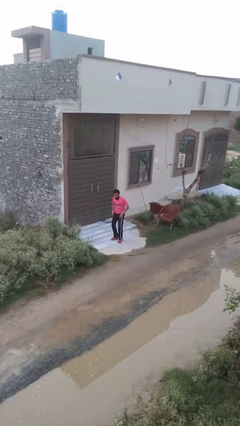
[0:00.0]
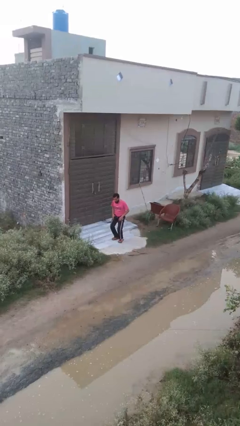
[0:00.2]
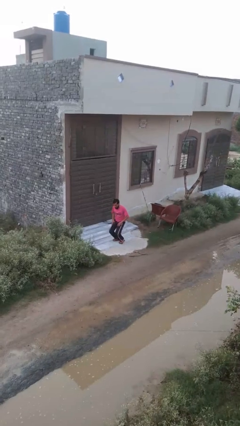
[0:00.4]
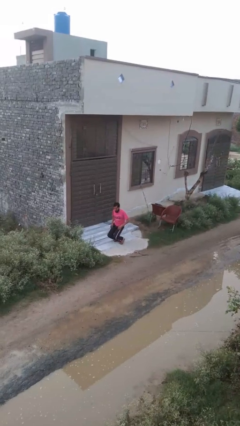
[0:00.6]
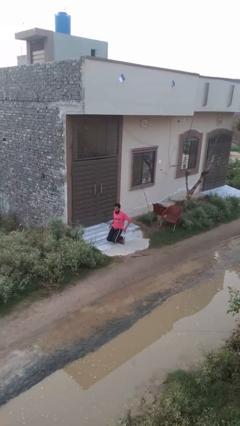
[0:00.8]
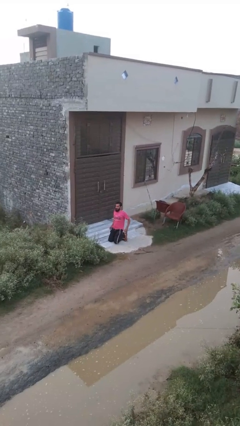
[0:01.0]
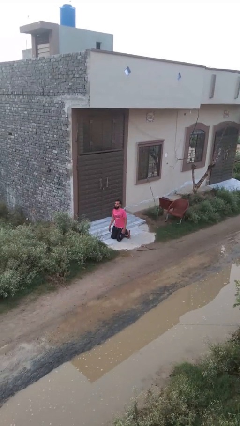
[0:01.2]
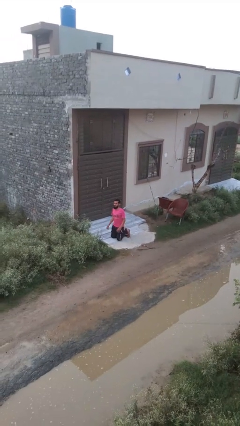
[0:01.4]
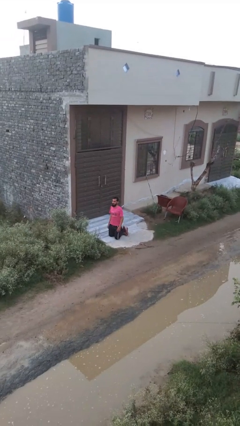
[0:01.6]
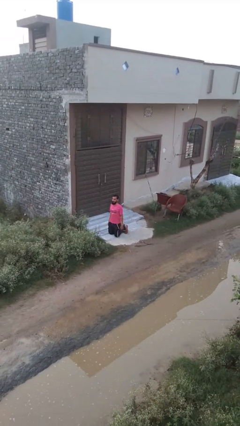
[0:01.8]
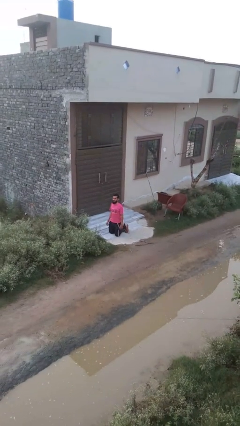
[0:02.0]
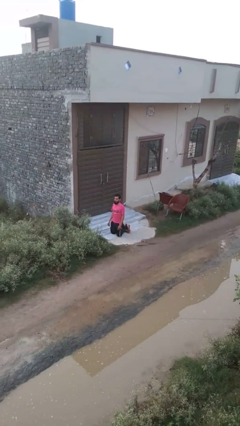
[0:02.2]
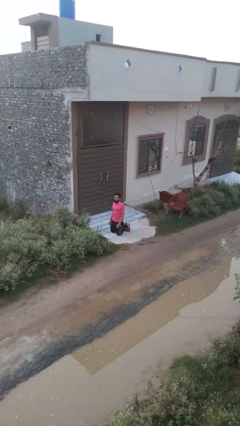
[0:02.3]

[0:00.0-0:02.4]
person kneels

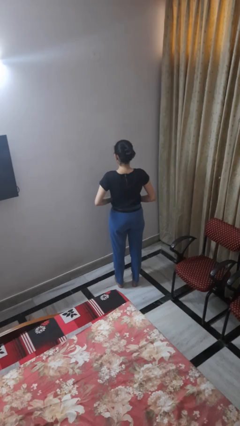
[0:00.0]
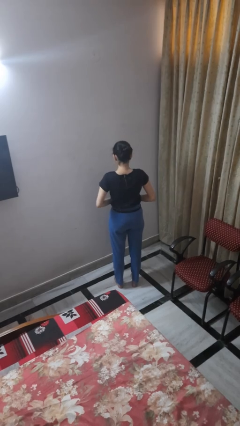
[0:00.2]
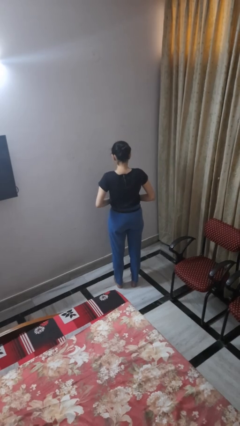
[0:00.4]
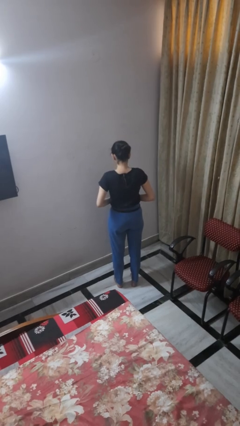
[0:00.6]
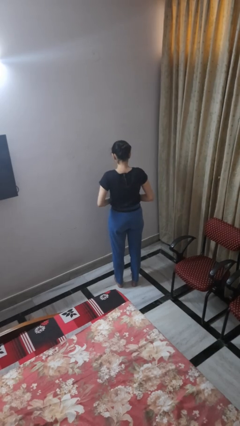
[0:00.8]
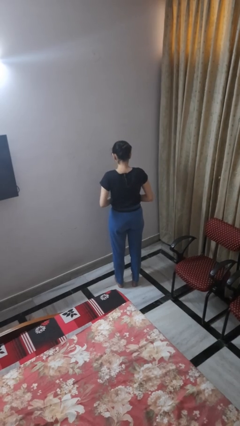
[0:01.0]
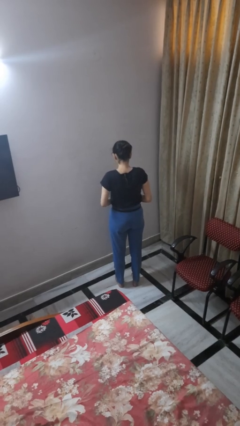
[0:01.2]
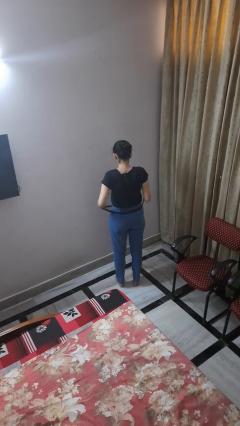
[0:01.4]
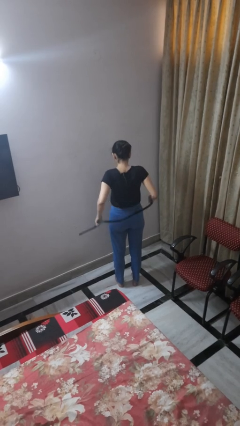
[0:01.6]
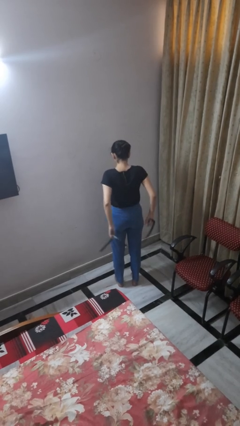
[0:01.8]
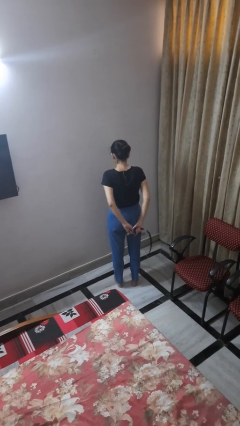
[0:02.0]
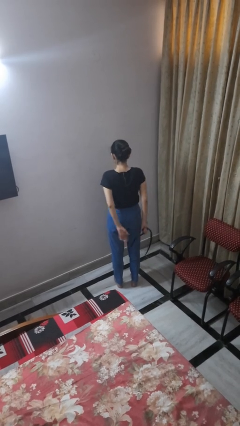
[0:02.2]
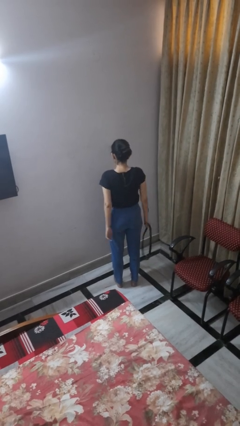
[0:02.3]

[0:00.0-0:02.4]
person takes off belt

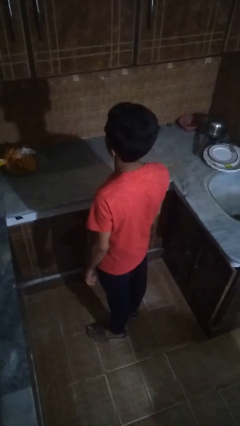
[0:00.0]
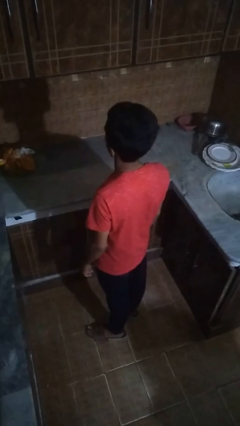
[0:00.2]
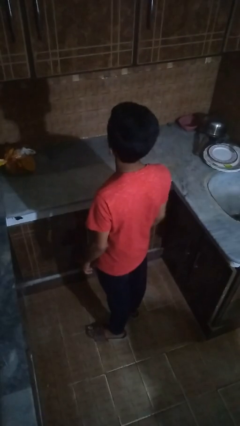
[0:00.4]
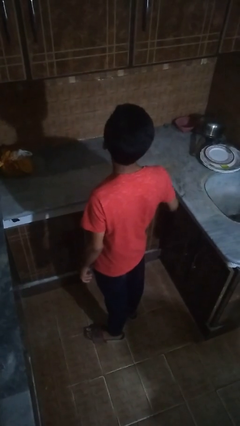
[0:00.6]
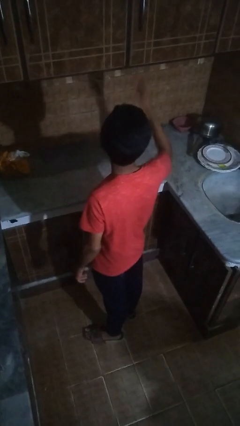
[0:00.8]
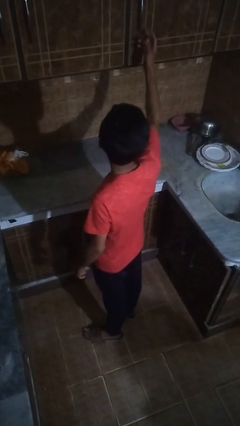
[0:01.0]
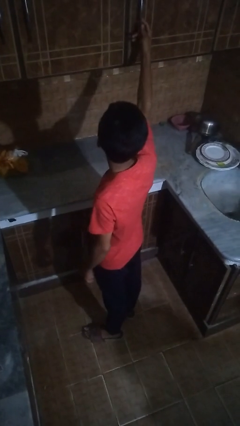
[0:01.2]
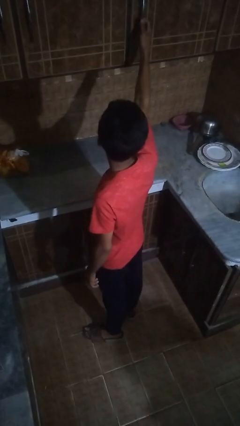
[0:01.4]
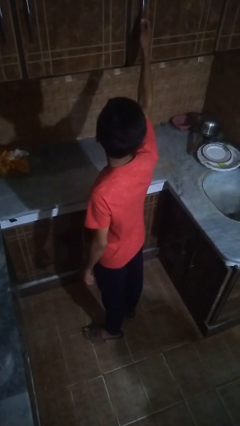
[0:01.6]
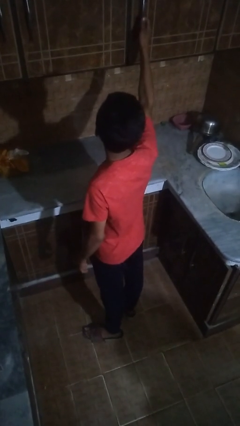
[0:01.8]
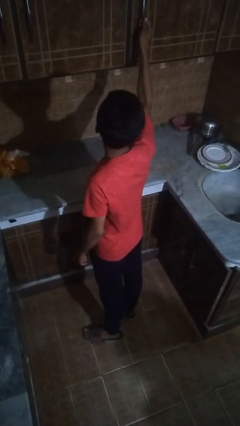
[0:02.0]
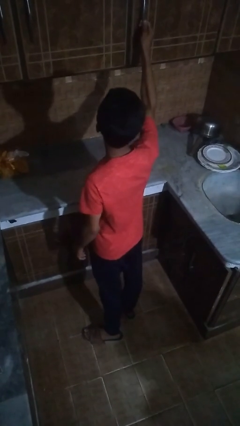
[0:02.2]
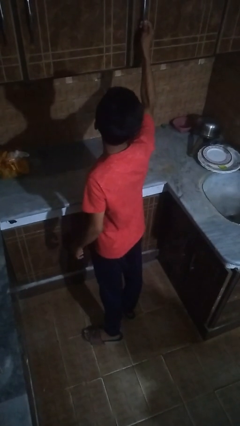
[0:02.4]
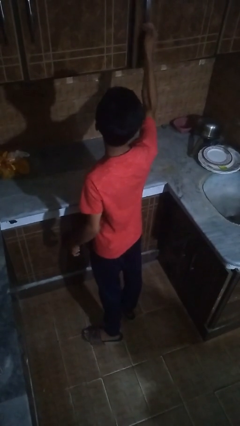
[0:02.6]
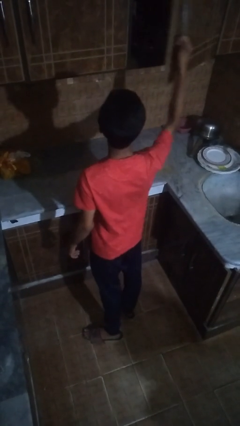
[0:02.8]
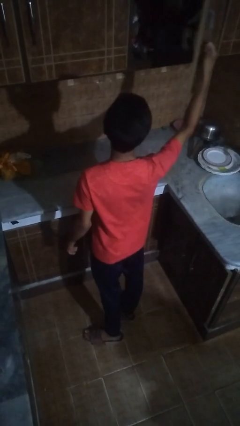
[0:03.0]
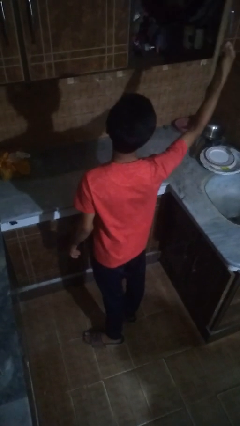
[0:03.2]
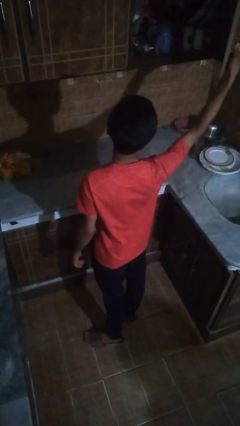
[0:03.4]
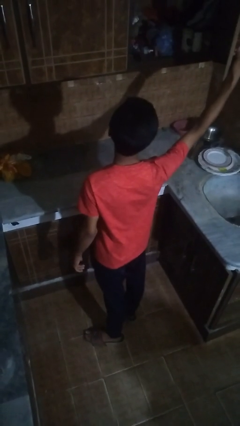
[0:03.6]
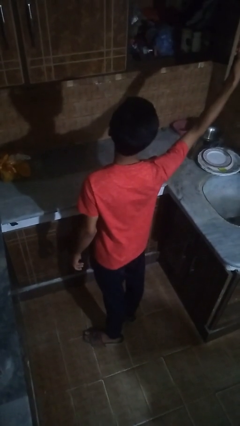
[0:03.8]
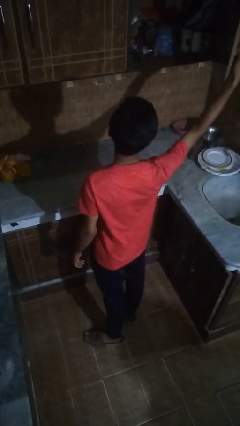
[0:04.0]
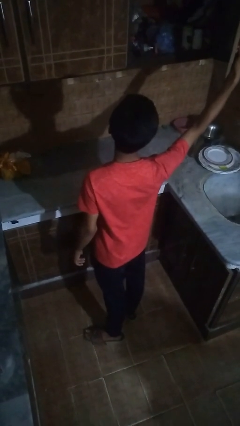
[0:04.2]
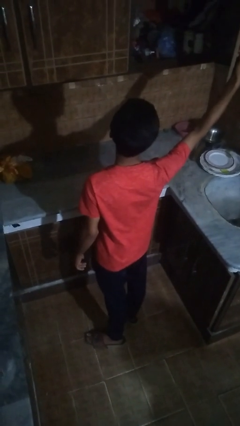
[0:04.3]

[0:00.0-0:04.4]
person opens cabinet

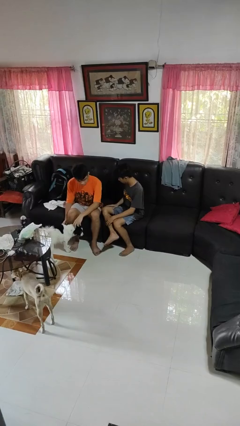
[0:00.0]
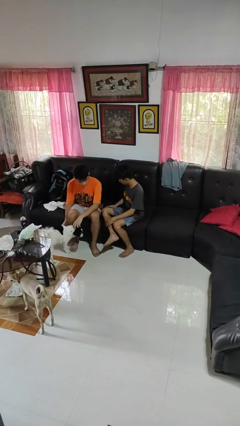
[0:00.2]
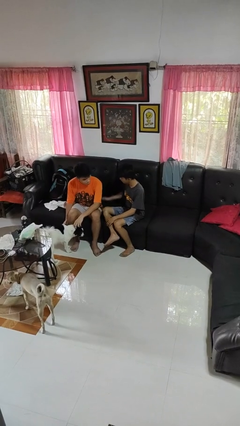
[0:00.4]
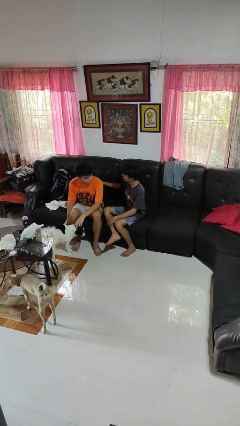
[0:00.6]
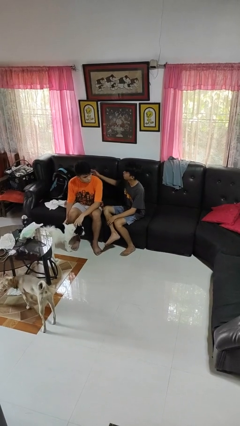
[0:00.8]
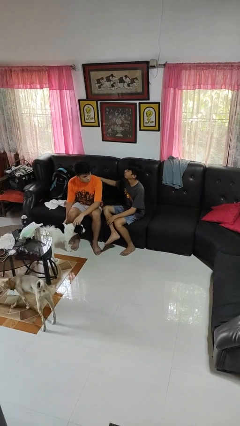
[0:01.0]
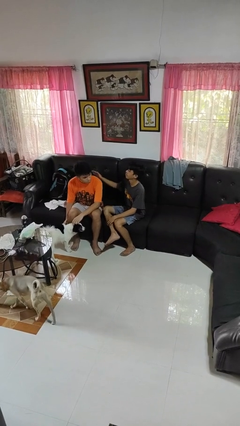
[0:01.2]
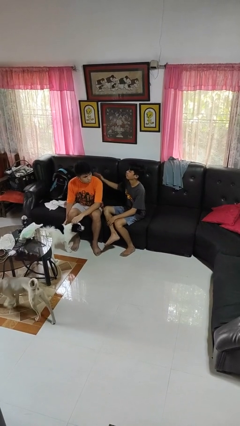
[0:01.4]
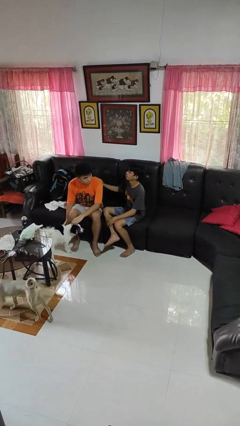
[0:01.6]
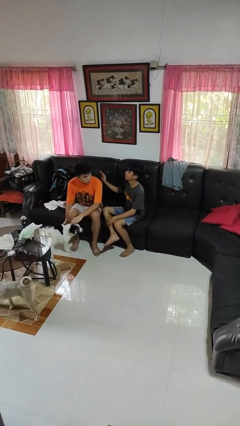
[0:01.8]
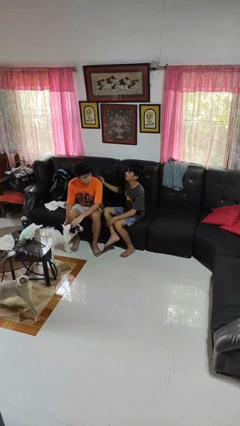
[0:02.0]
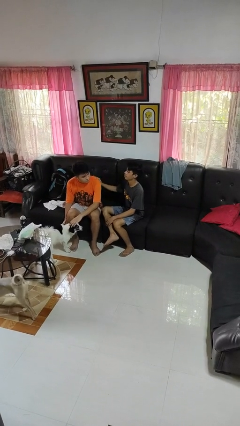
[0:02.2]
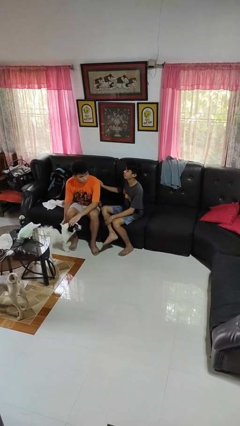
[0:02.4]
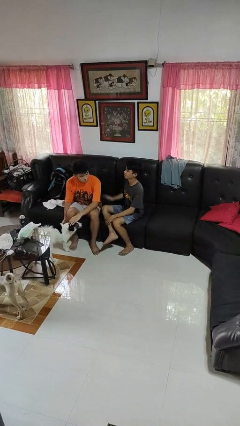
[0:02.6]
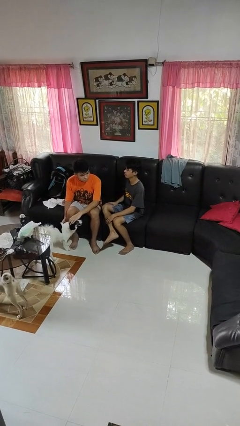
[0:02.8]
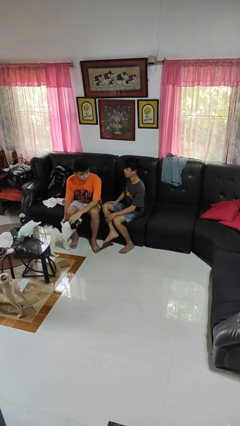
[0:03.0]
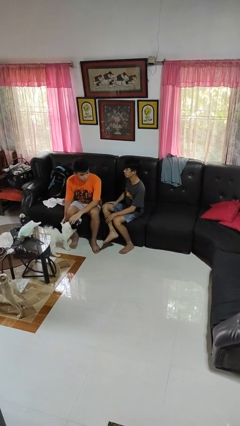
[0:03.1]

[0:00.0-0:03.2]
person touches back of person

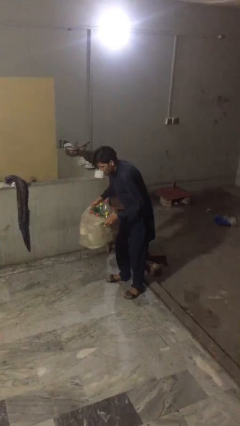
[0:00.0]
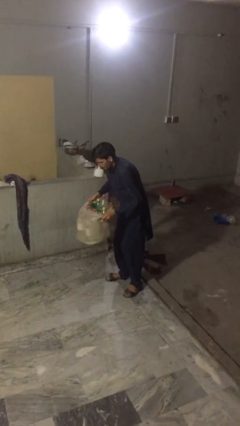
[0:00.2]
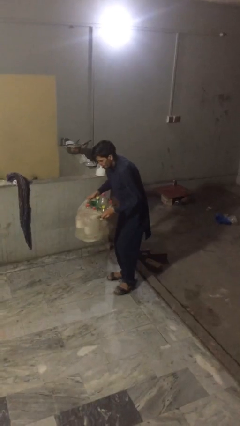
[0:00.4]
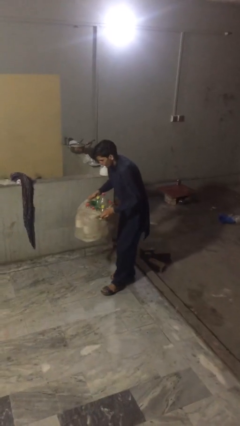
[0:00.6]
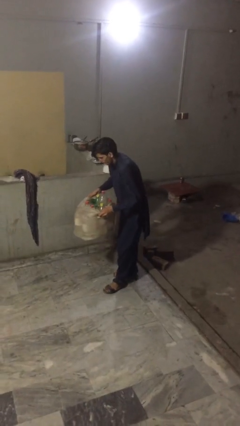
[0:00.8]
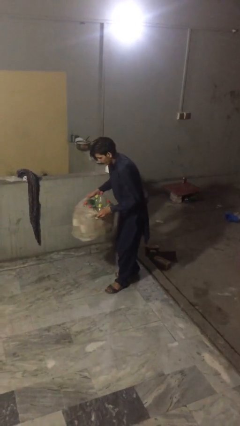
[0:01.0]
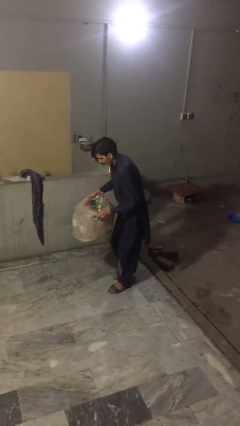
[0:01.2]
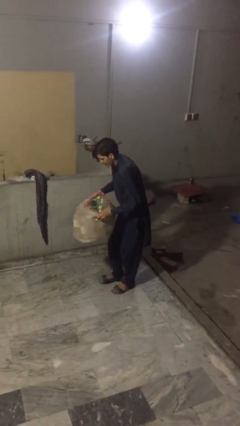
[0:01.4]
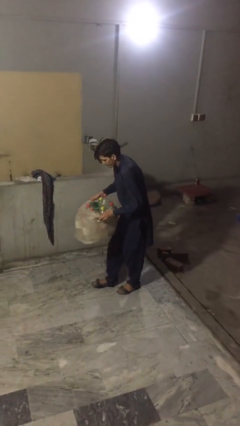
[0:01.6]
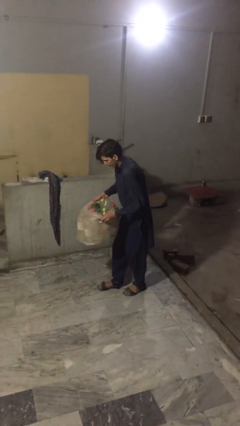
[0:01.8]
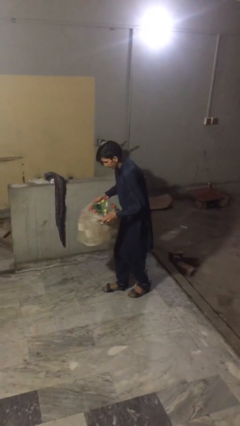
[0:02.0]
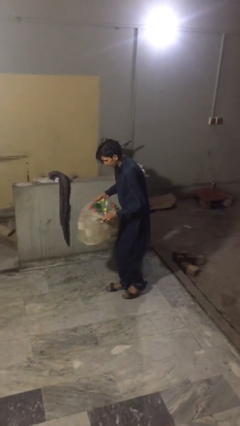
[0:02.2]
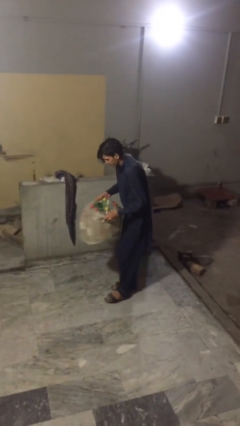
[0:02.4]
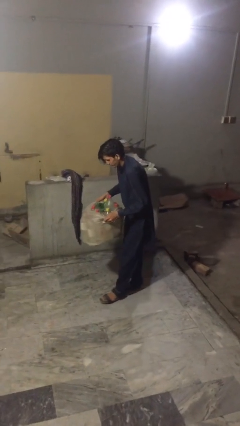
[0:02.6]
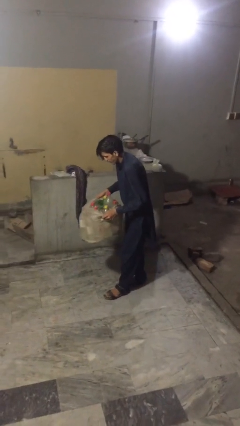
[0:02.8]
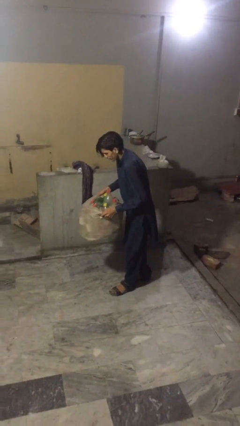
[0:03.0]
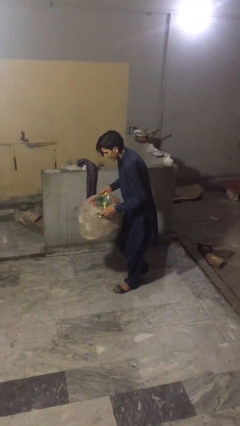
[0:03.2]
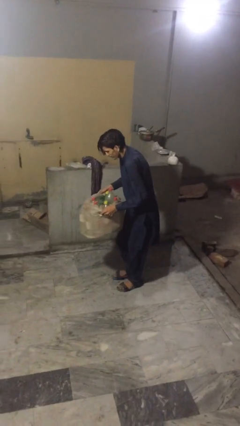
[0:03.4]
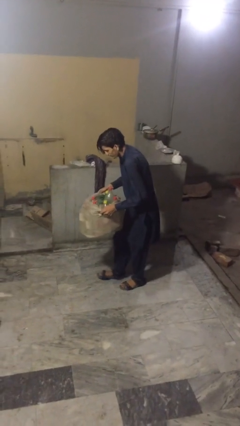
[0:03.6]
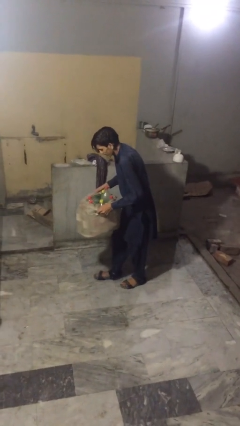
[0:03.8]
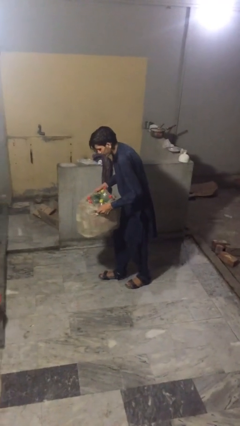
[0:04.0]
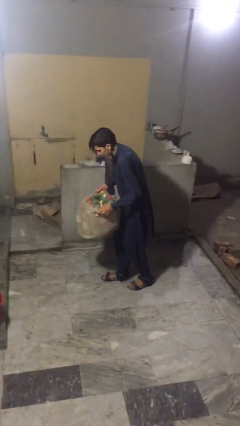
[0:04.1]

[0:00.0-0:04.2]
person carries heavy object

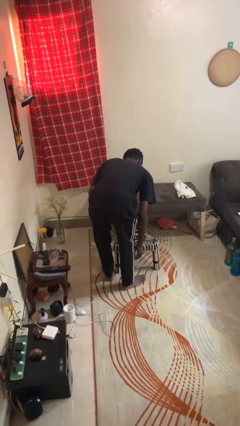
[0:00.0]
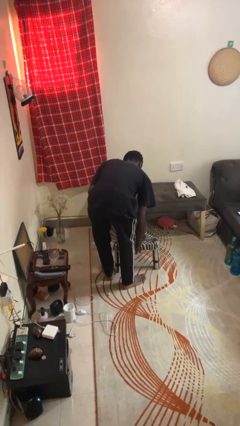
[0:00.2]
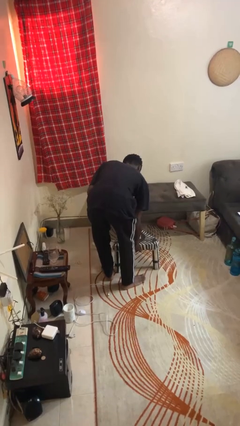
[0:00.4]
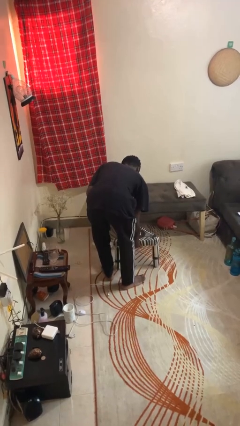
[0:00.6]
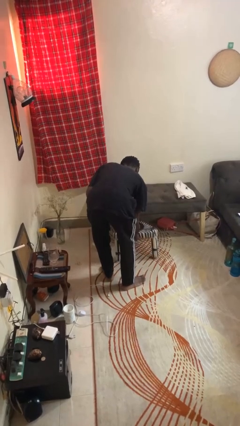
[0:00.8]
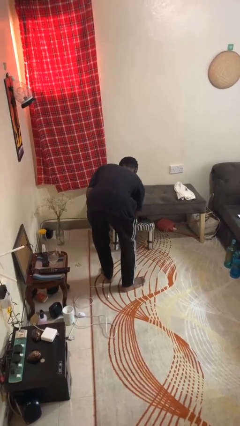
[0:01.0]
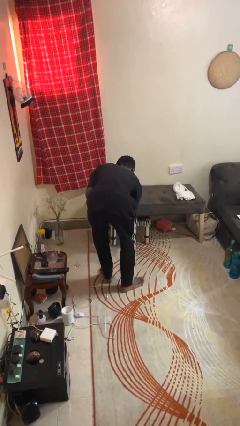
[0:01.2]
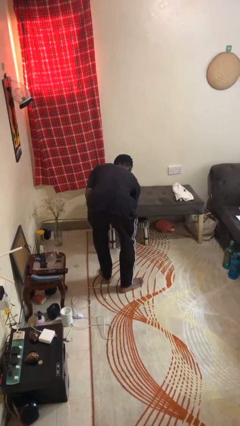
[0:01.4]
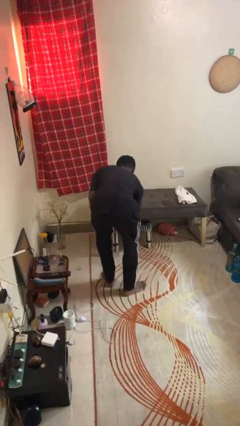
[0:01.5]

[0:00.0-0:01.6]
person pushes in chair
